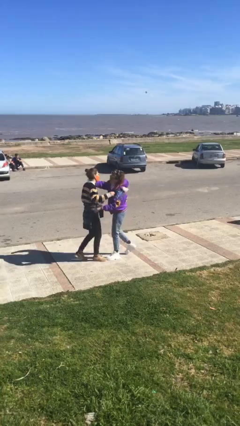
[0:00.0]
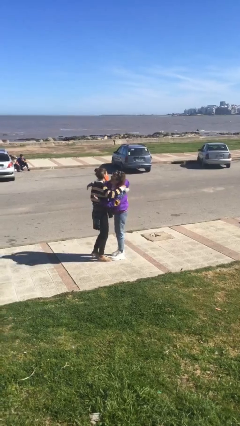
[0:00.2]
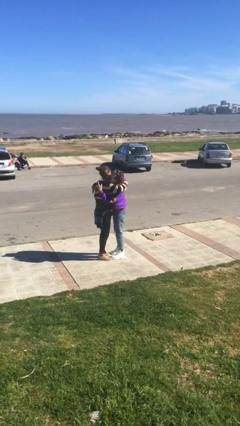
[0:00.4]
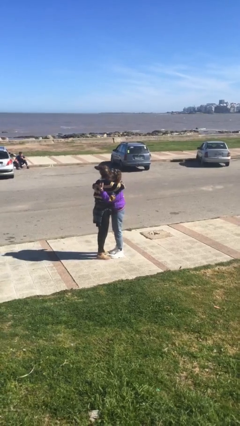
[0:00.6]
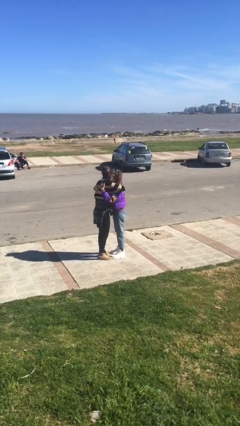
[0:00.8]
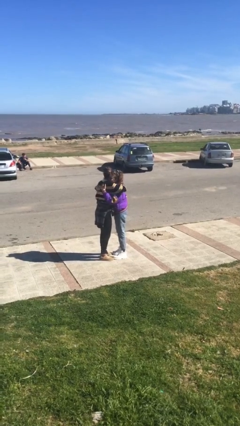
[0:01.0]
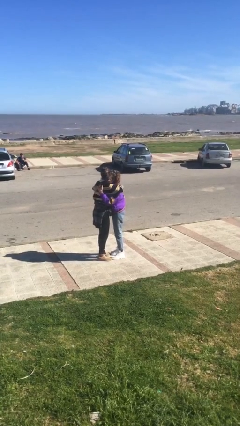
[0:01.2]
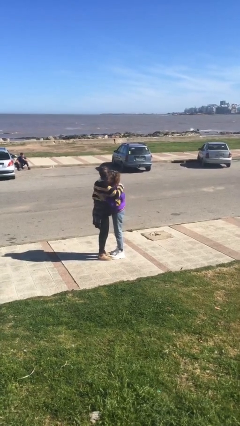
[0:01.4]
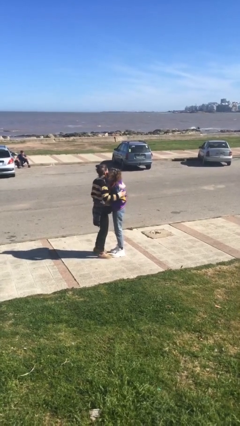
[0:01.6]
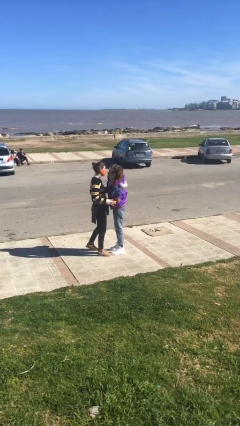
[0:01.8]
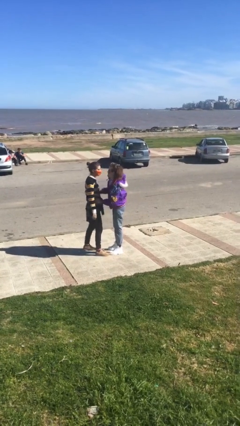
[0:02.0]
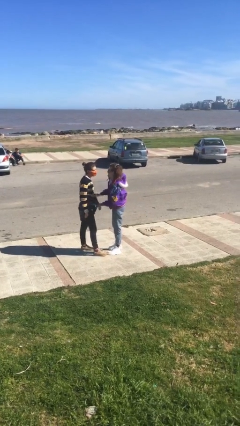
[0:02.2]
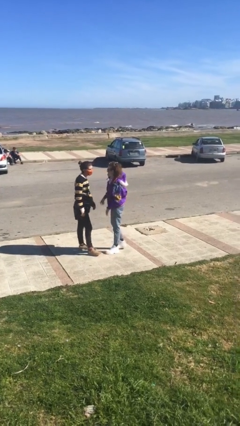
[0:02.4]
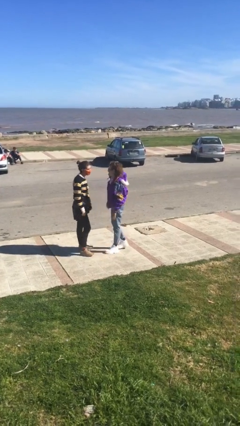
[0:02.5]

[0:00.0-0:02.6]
person embraces person

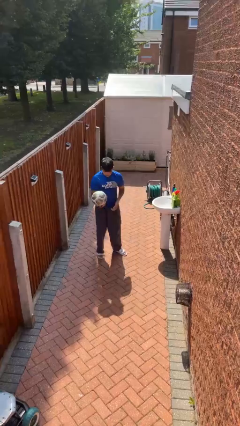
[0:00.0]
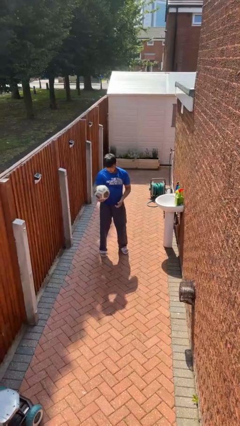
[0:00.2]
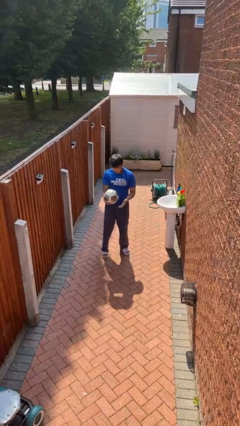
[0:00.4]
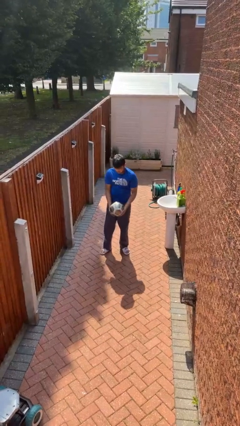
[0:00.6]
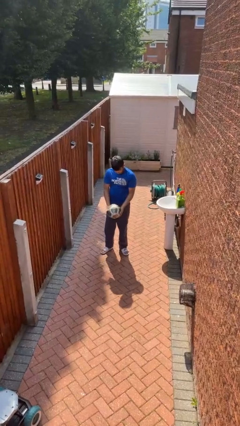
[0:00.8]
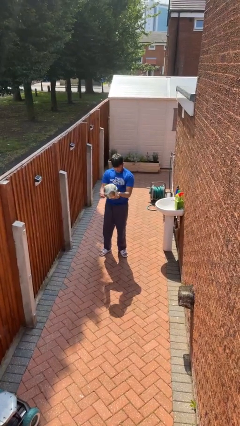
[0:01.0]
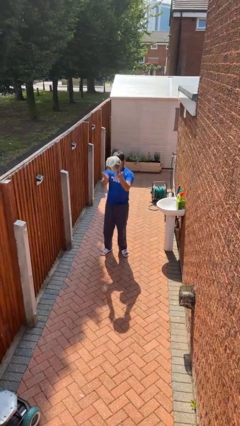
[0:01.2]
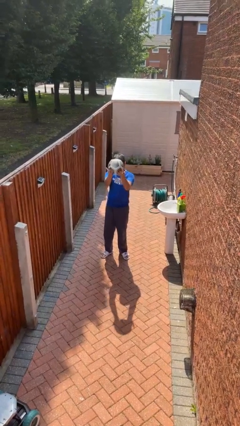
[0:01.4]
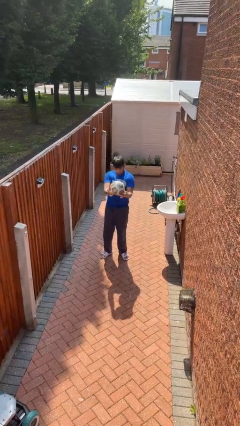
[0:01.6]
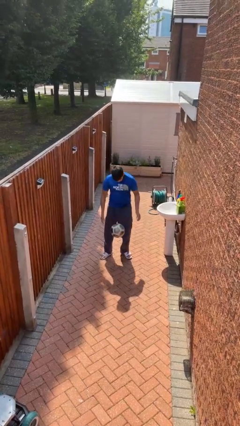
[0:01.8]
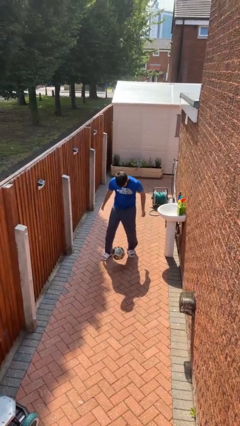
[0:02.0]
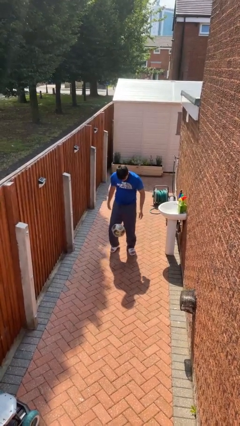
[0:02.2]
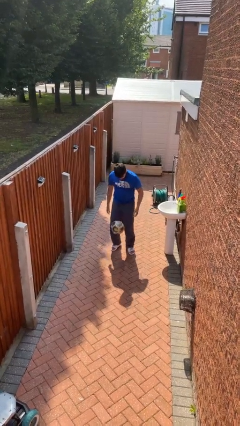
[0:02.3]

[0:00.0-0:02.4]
person drops object

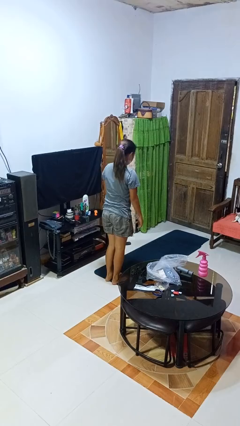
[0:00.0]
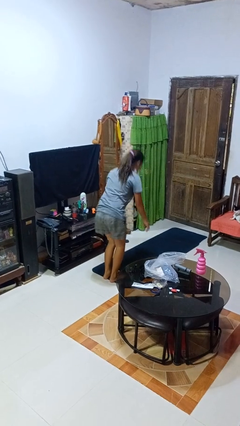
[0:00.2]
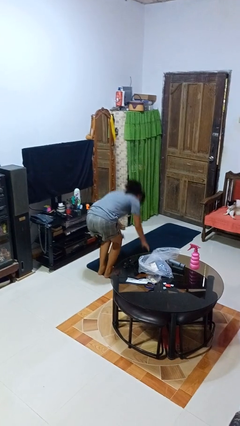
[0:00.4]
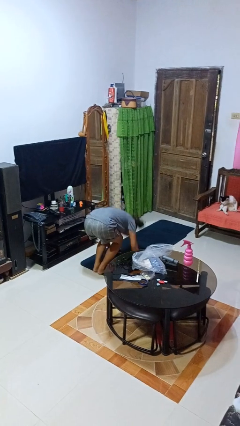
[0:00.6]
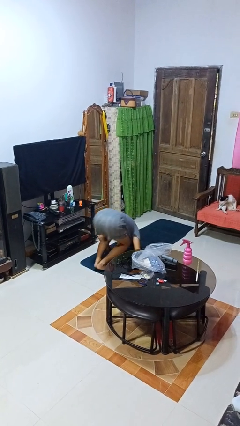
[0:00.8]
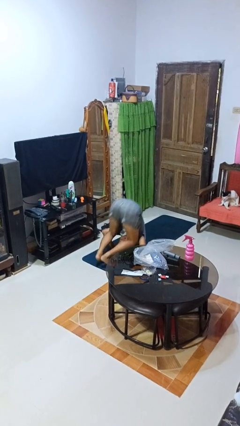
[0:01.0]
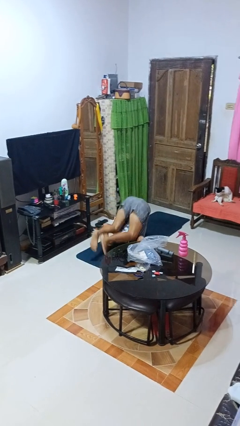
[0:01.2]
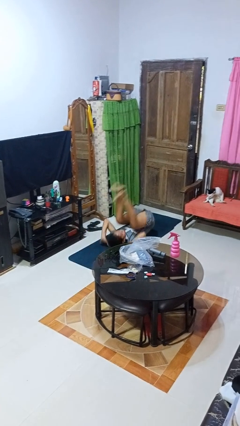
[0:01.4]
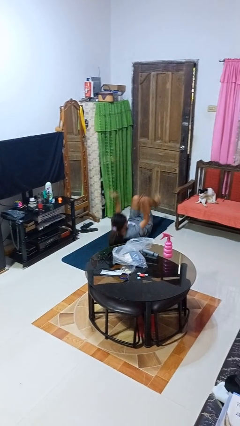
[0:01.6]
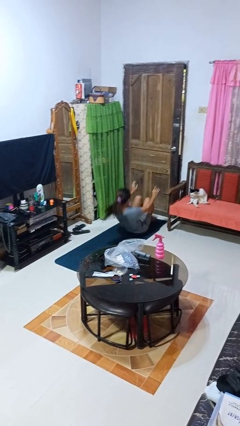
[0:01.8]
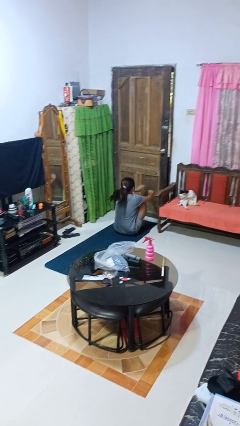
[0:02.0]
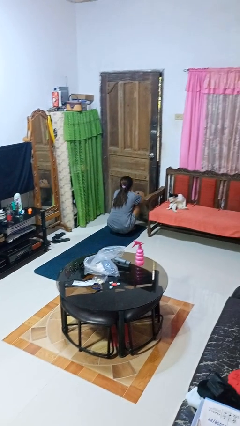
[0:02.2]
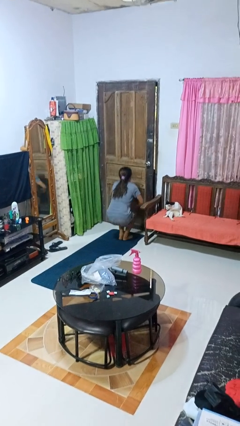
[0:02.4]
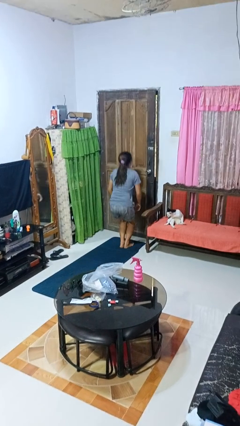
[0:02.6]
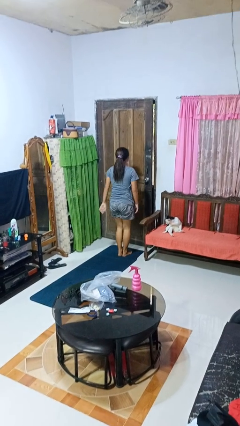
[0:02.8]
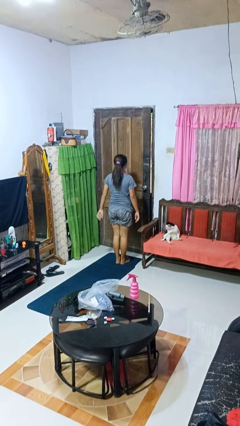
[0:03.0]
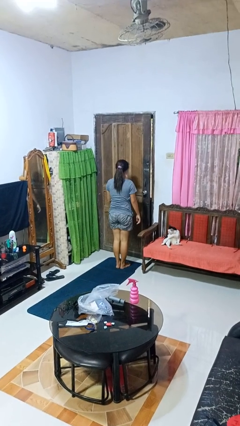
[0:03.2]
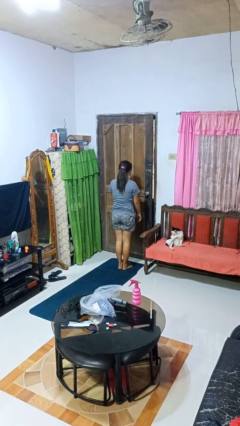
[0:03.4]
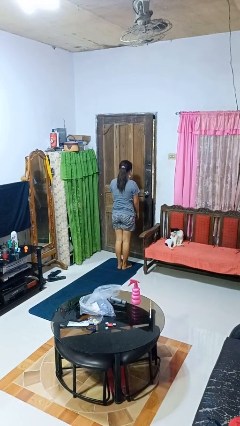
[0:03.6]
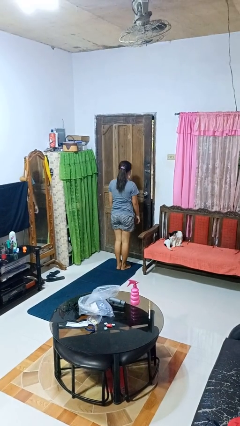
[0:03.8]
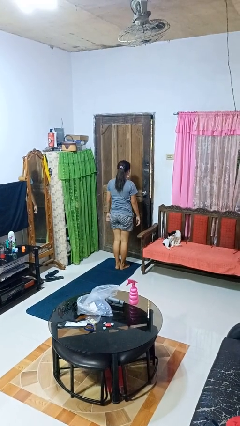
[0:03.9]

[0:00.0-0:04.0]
person somersaults

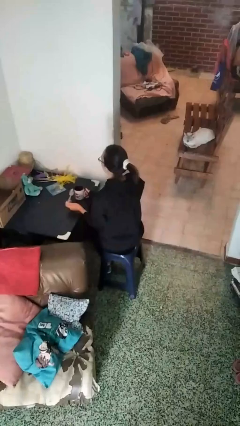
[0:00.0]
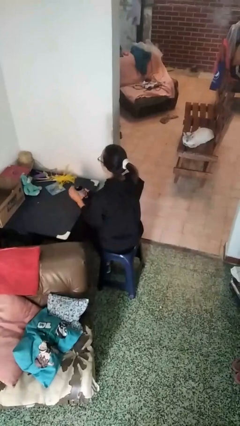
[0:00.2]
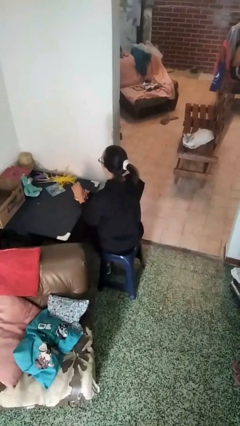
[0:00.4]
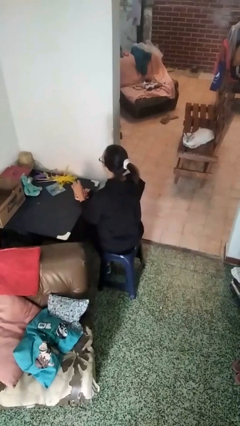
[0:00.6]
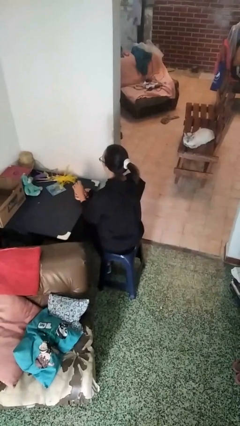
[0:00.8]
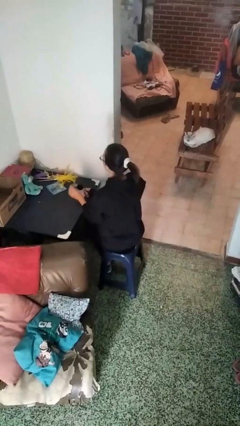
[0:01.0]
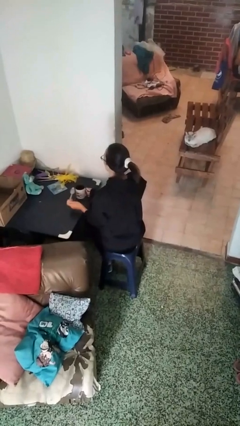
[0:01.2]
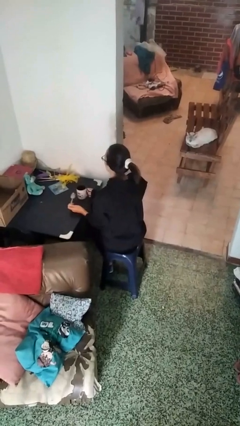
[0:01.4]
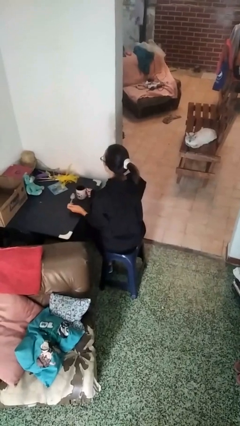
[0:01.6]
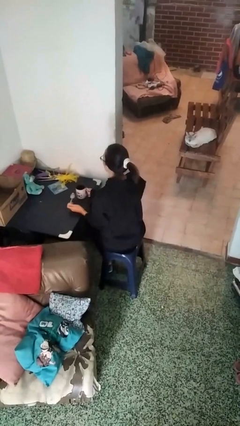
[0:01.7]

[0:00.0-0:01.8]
person stirs mug

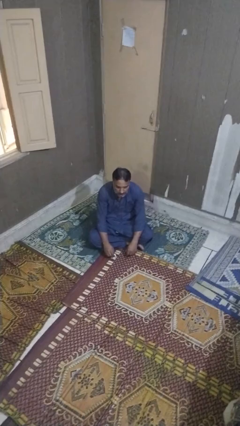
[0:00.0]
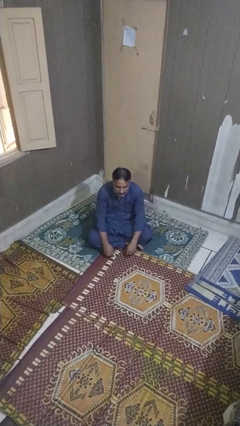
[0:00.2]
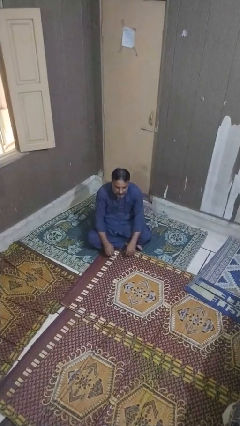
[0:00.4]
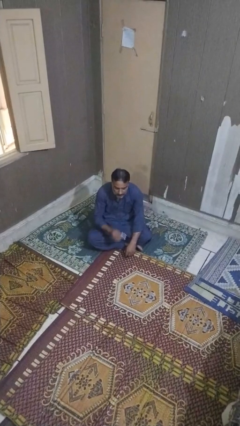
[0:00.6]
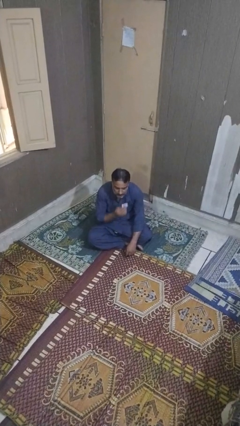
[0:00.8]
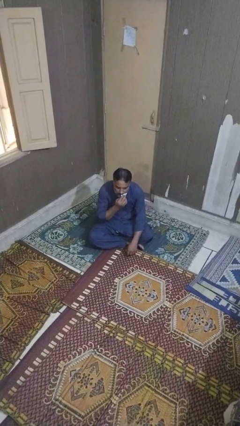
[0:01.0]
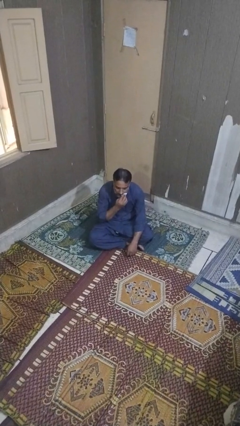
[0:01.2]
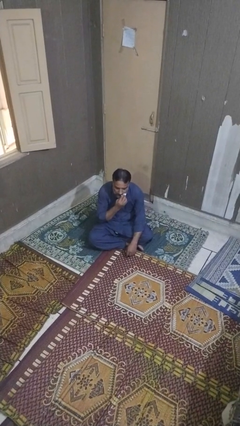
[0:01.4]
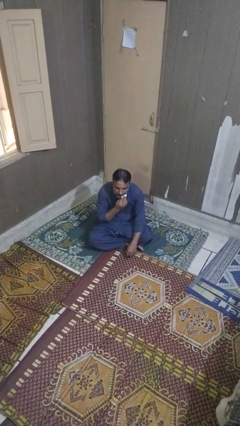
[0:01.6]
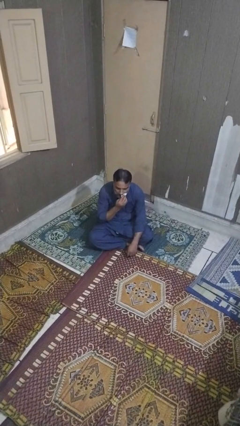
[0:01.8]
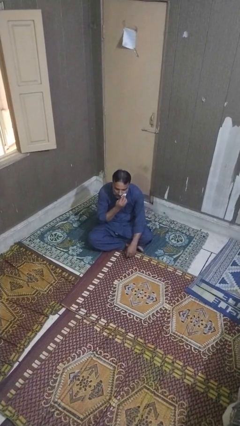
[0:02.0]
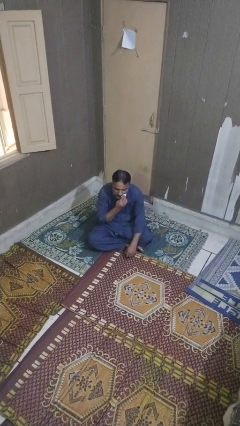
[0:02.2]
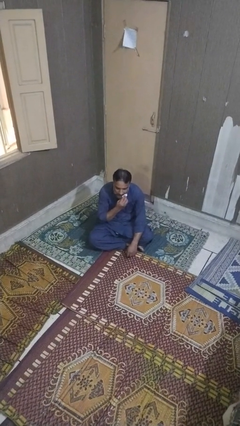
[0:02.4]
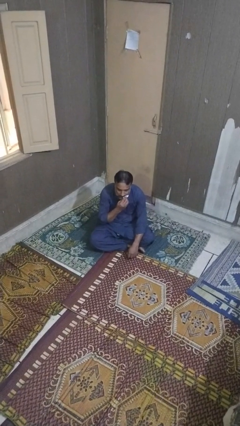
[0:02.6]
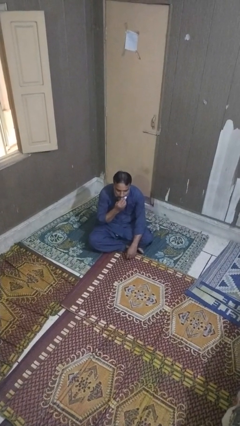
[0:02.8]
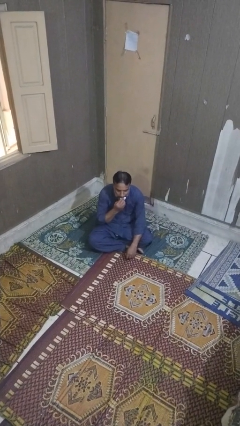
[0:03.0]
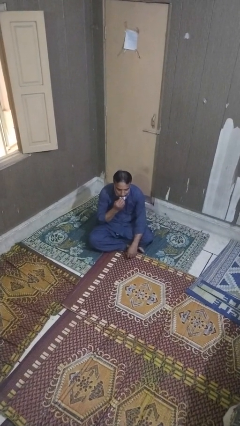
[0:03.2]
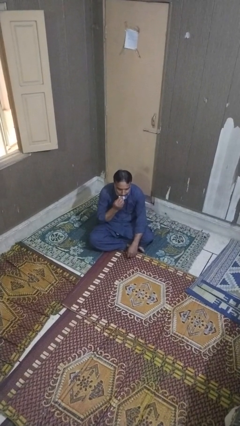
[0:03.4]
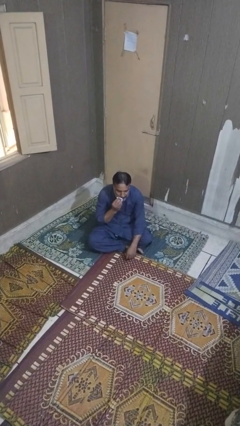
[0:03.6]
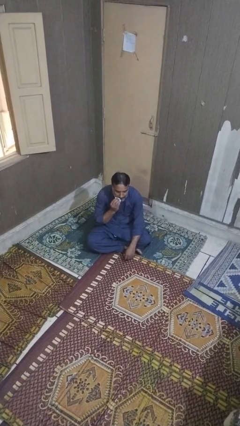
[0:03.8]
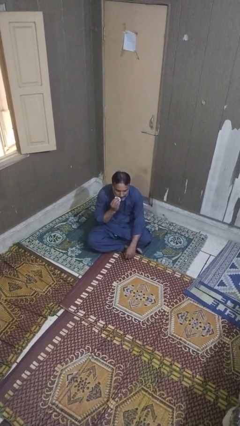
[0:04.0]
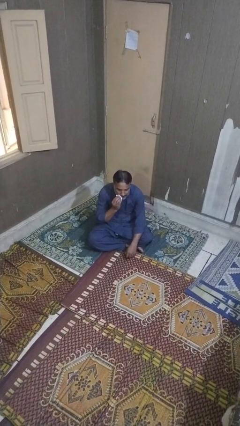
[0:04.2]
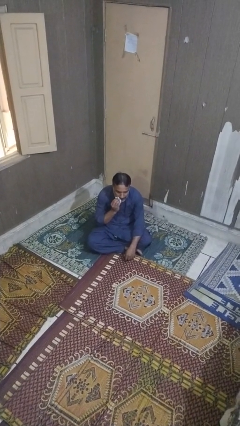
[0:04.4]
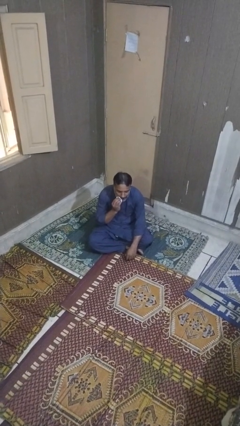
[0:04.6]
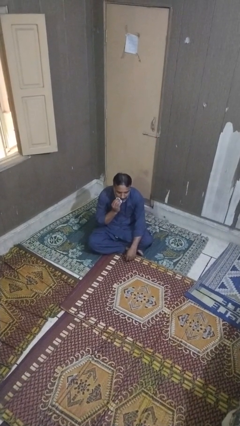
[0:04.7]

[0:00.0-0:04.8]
person wipes mouth with napkin

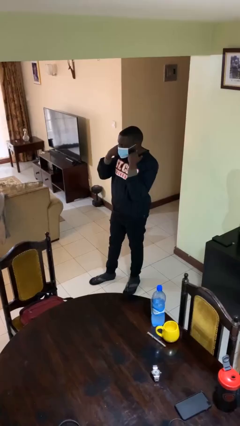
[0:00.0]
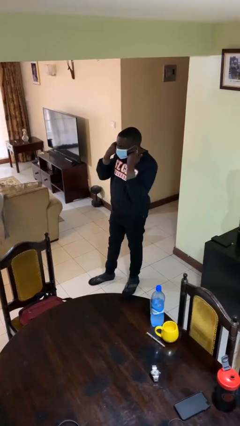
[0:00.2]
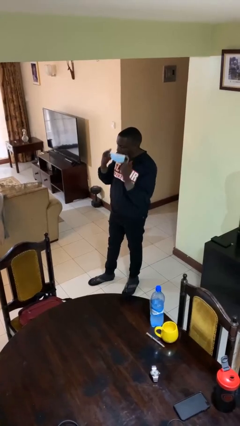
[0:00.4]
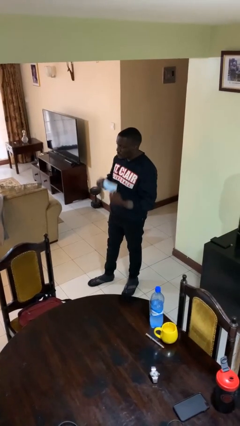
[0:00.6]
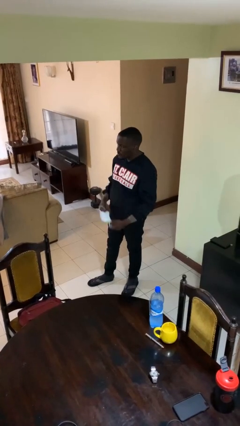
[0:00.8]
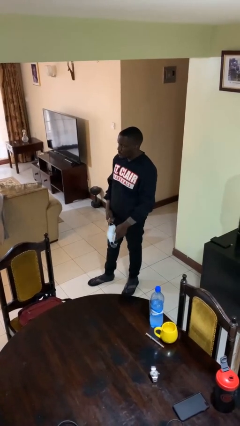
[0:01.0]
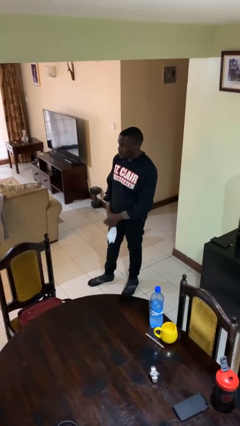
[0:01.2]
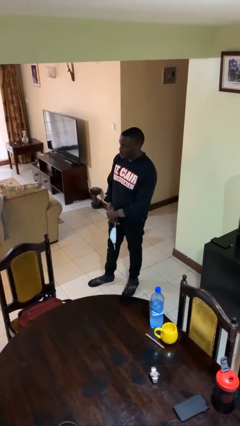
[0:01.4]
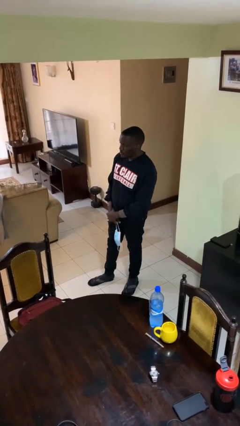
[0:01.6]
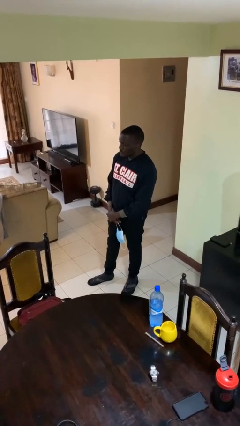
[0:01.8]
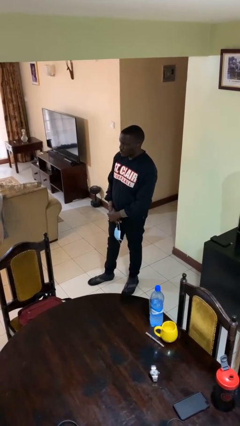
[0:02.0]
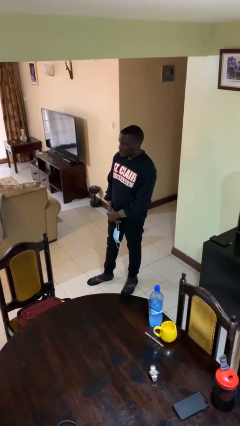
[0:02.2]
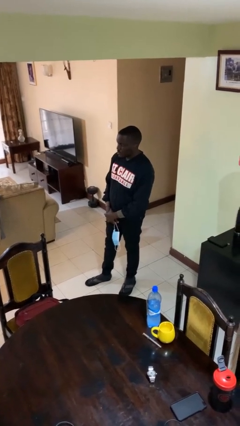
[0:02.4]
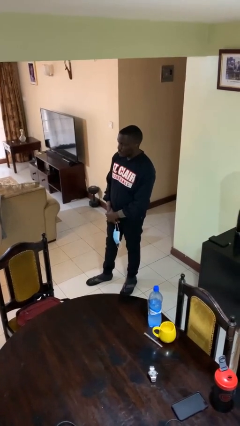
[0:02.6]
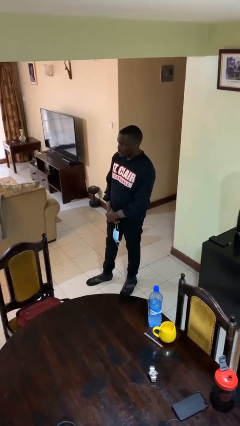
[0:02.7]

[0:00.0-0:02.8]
person takes off facemask
